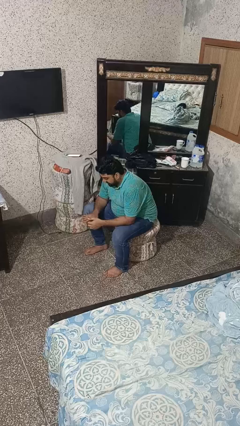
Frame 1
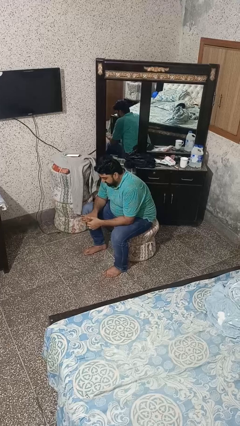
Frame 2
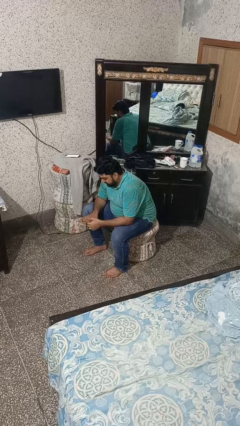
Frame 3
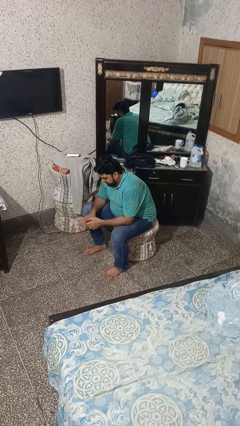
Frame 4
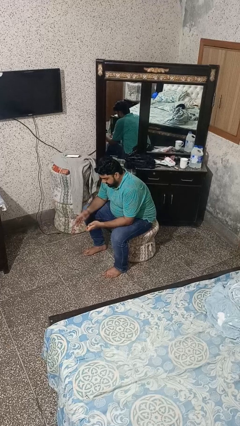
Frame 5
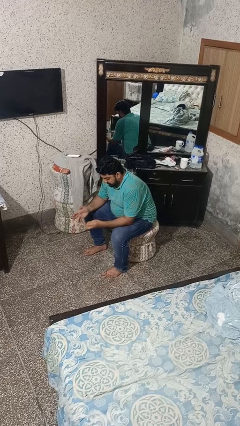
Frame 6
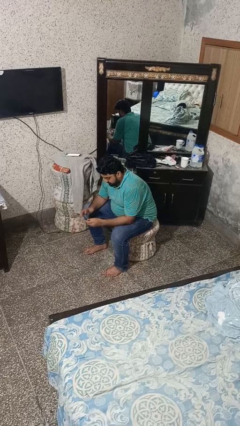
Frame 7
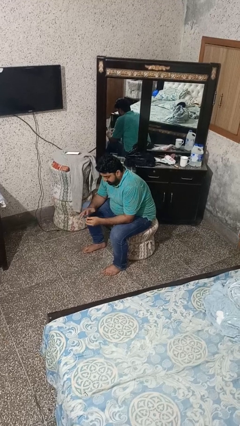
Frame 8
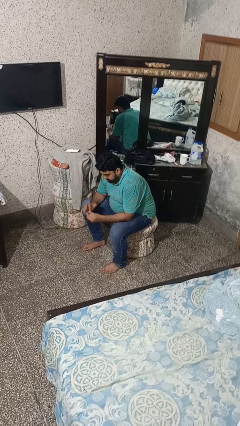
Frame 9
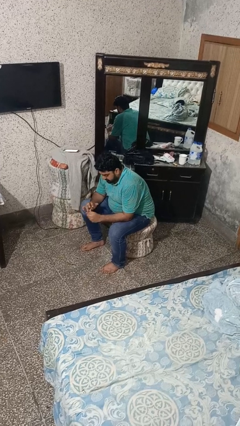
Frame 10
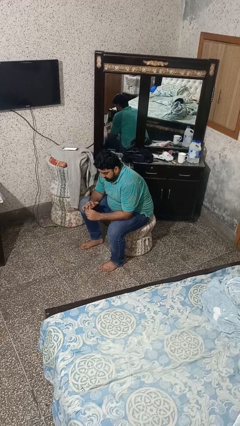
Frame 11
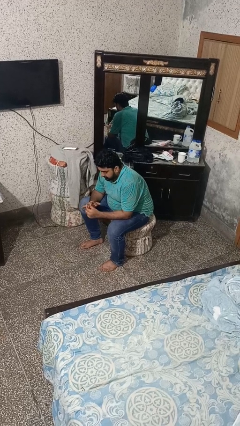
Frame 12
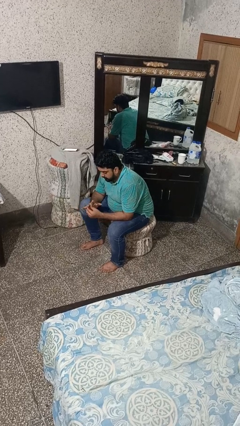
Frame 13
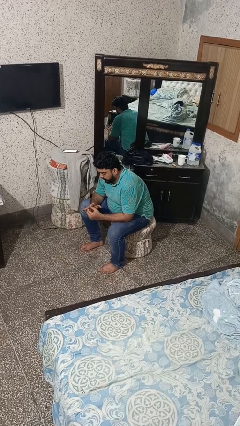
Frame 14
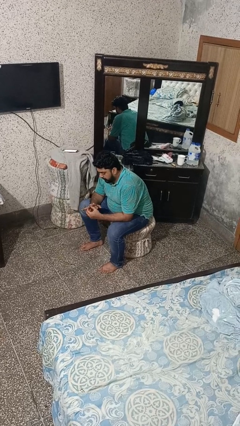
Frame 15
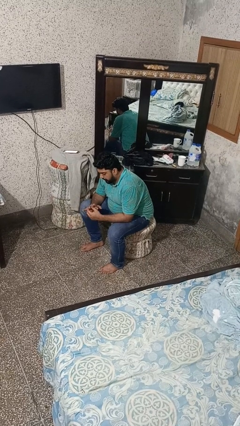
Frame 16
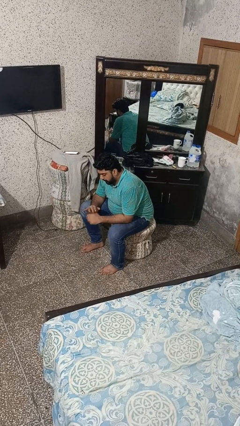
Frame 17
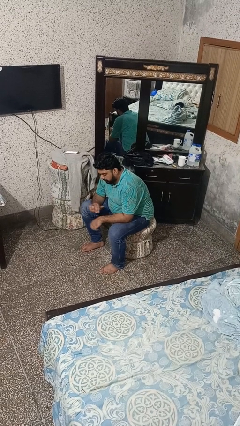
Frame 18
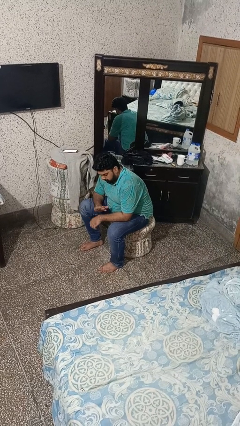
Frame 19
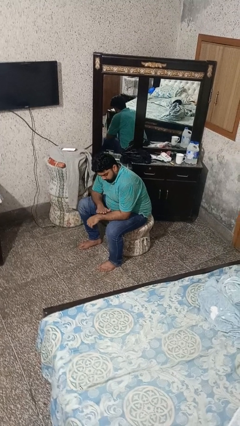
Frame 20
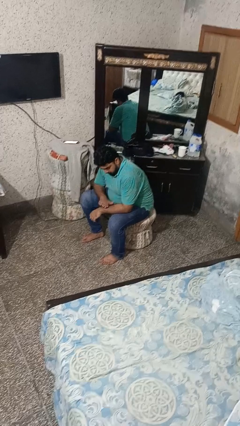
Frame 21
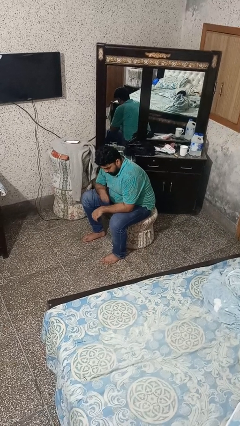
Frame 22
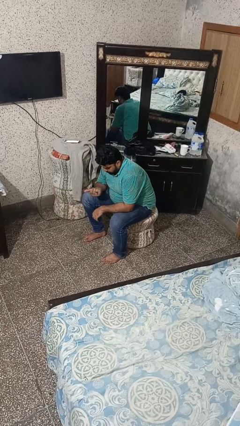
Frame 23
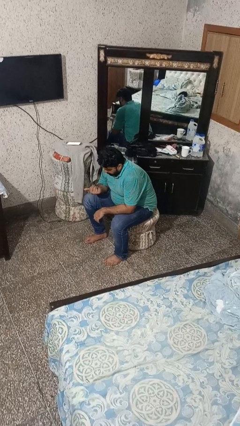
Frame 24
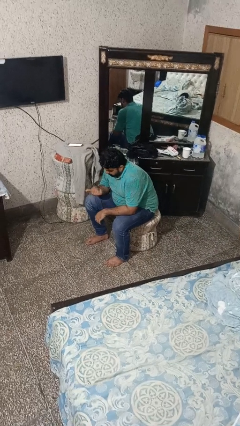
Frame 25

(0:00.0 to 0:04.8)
person puts on ring

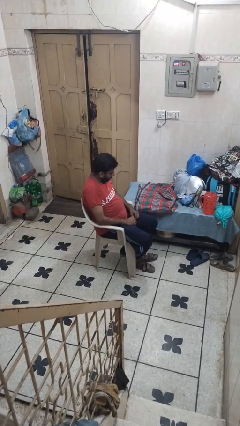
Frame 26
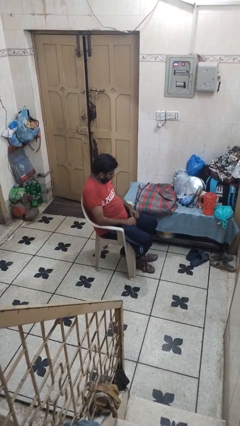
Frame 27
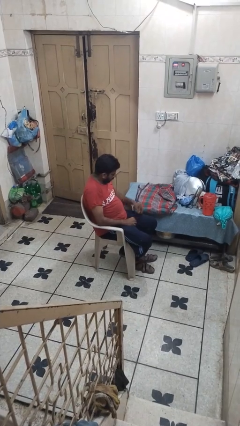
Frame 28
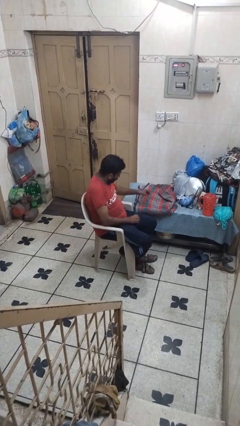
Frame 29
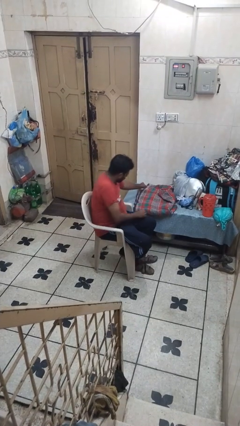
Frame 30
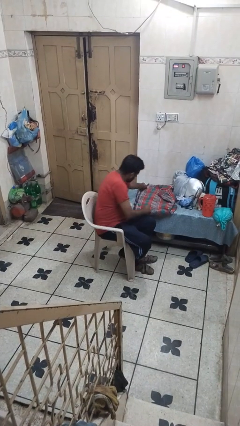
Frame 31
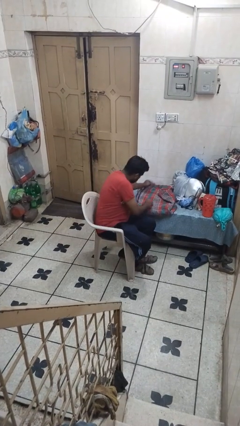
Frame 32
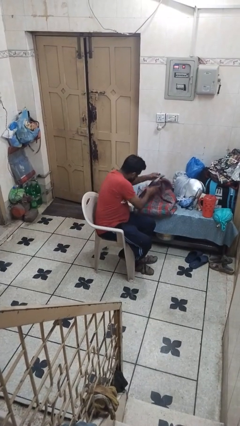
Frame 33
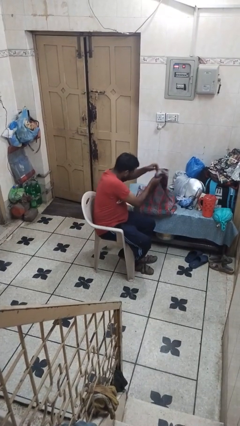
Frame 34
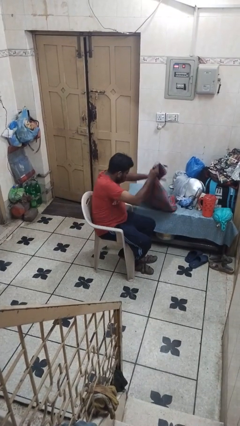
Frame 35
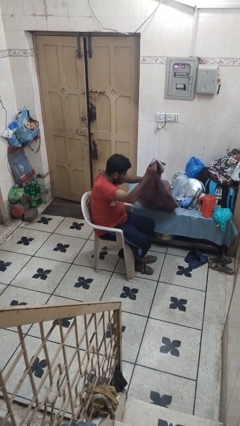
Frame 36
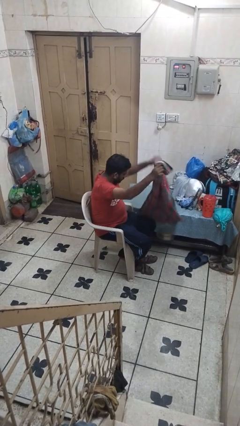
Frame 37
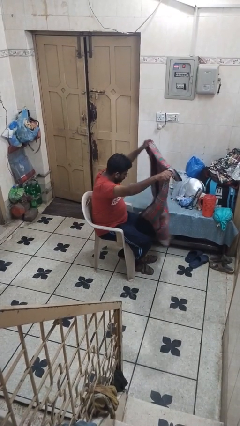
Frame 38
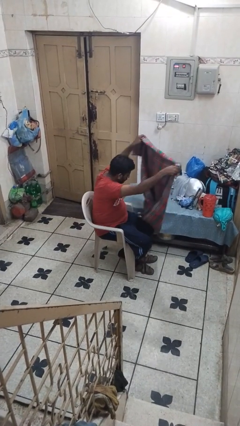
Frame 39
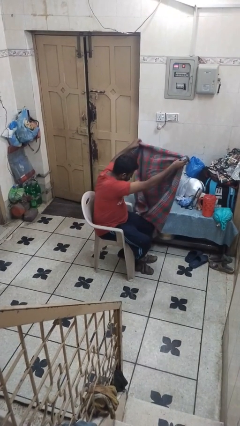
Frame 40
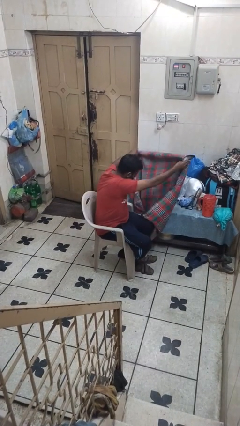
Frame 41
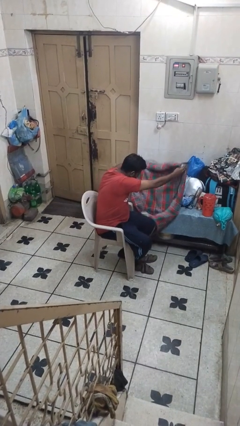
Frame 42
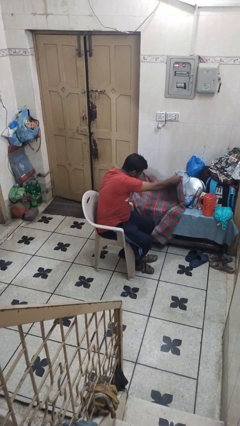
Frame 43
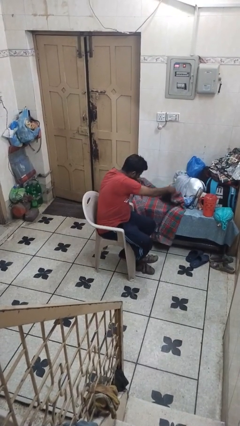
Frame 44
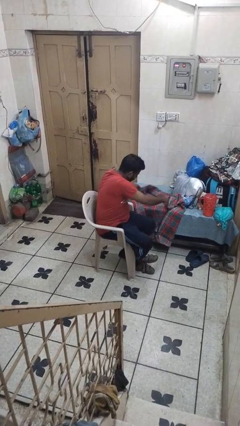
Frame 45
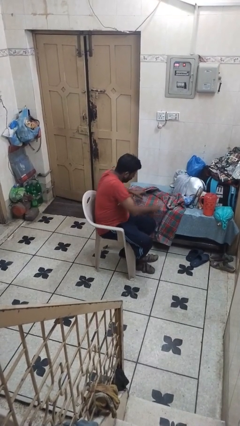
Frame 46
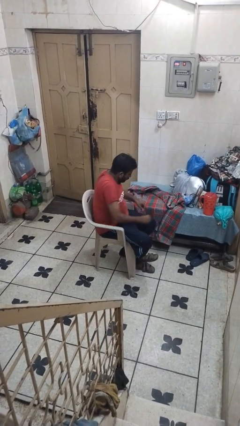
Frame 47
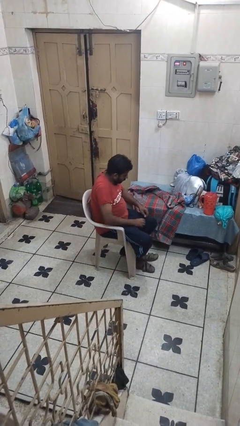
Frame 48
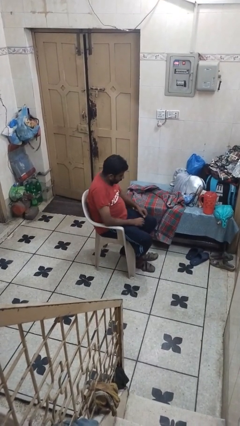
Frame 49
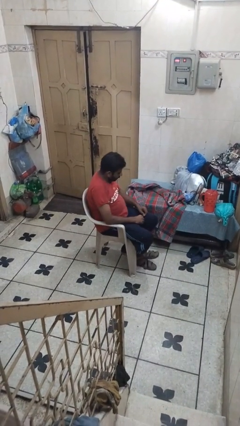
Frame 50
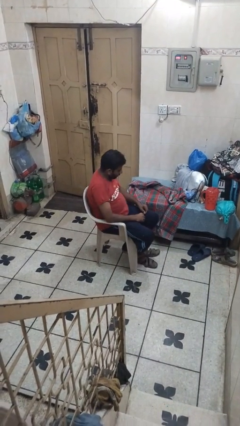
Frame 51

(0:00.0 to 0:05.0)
person unfolds blanket

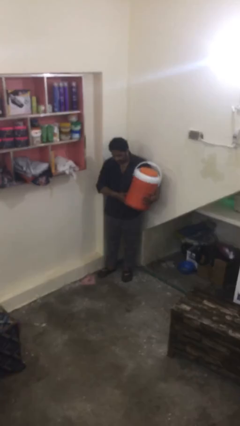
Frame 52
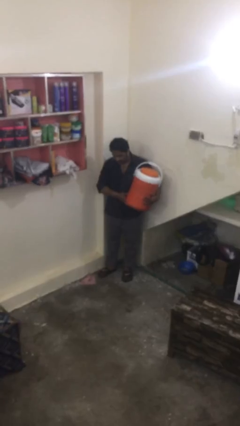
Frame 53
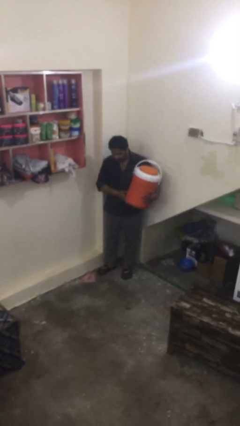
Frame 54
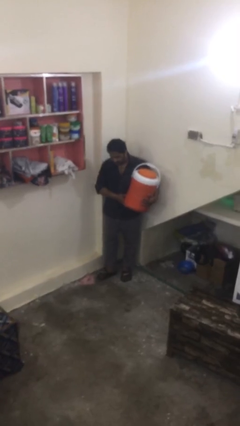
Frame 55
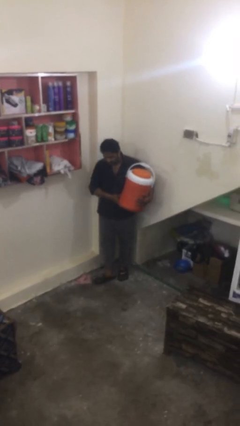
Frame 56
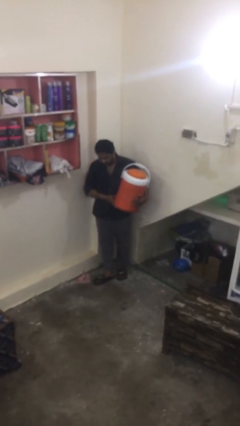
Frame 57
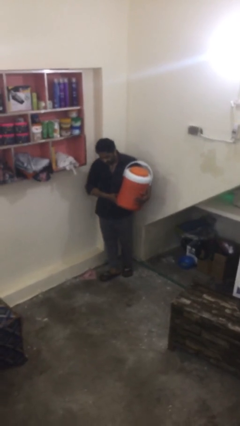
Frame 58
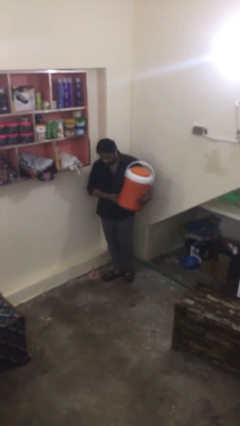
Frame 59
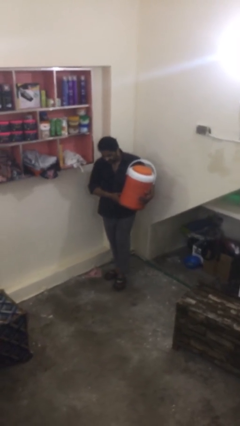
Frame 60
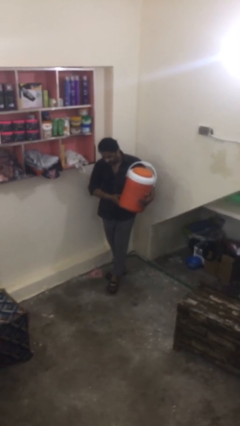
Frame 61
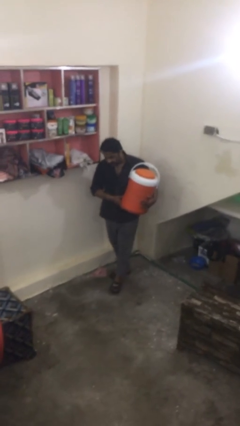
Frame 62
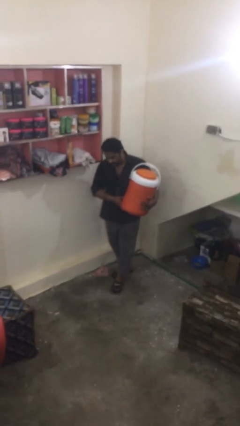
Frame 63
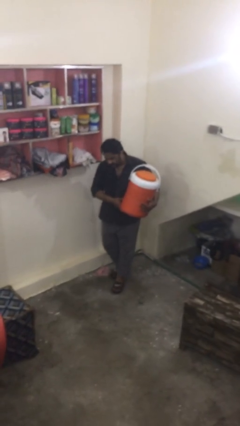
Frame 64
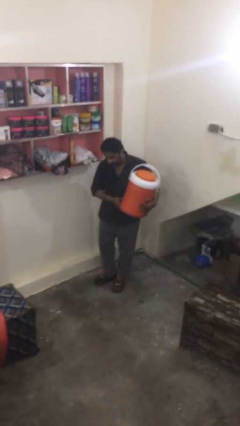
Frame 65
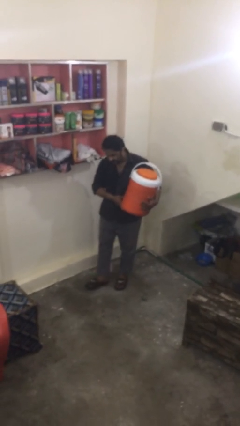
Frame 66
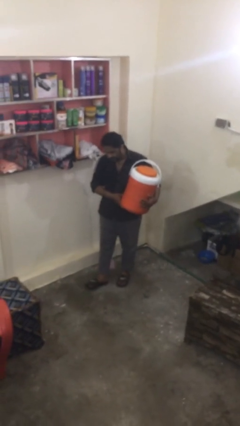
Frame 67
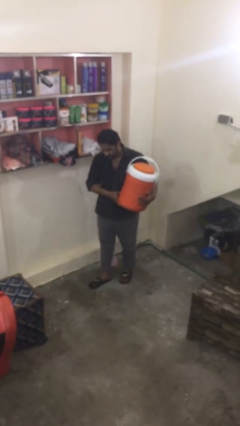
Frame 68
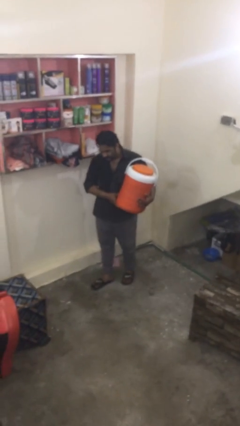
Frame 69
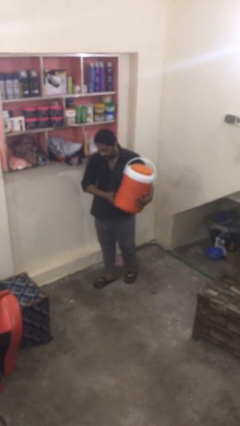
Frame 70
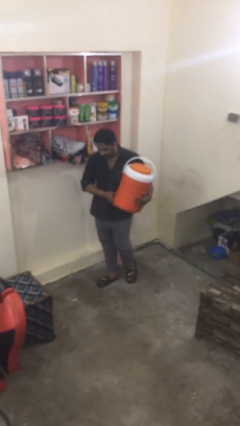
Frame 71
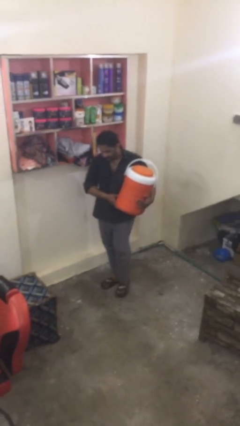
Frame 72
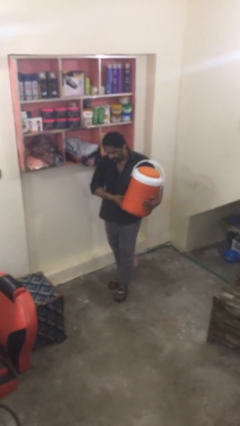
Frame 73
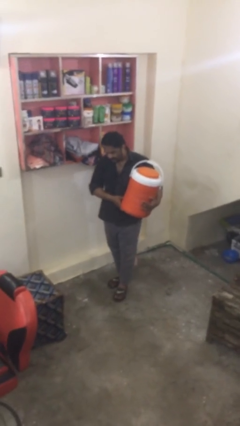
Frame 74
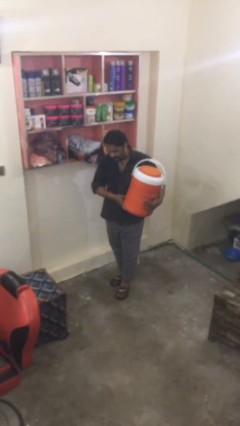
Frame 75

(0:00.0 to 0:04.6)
person carries heavy object

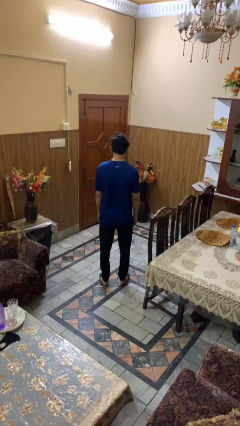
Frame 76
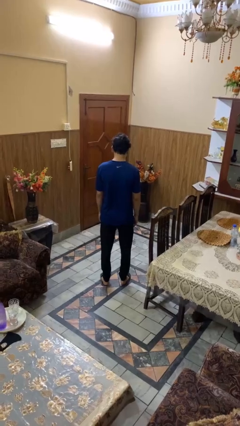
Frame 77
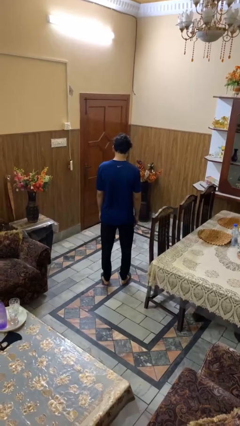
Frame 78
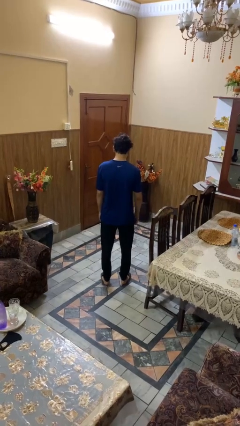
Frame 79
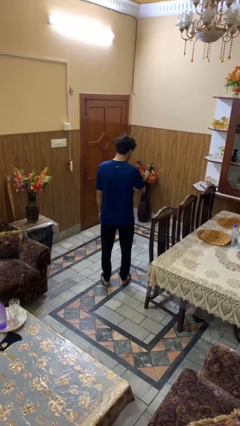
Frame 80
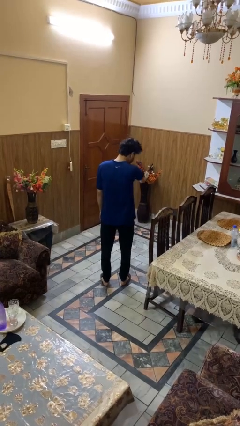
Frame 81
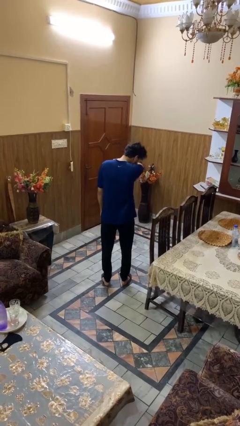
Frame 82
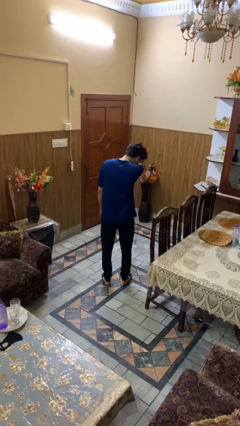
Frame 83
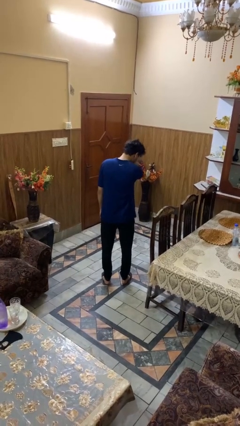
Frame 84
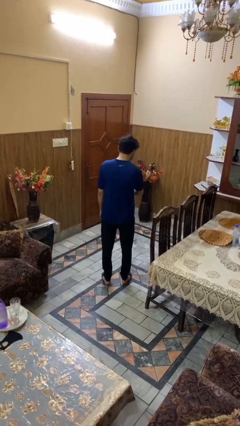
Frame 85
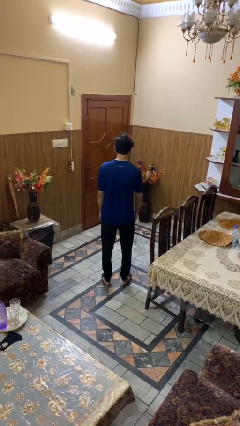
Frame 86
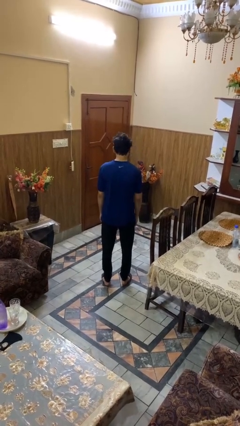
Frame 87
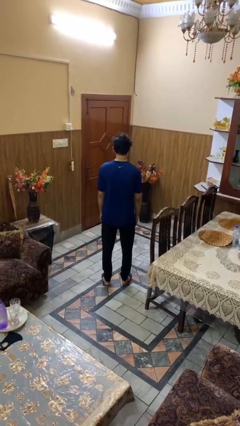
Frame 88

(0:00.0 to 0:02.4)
person sneezes into arm

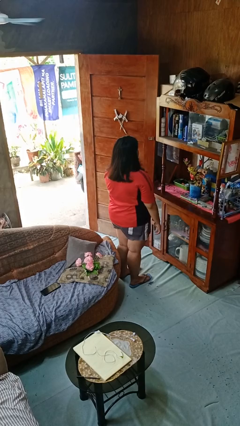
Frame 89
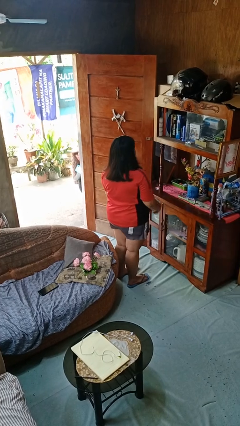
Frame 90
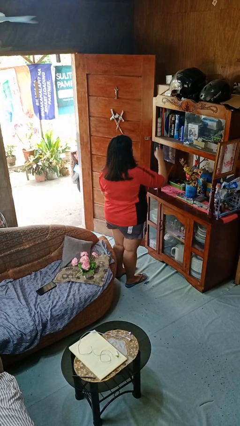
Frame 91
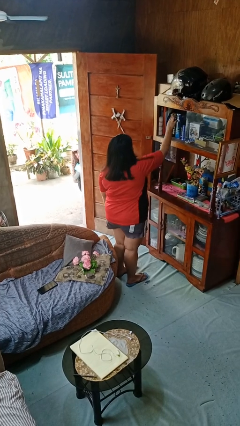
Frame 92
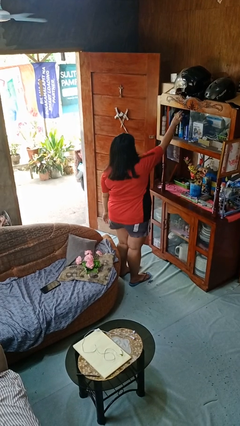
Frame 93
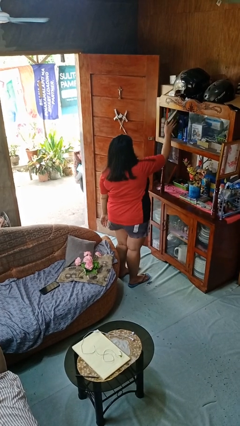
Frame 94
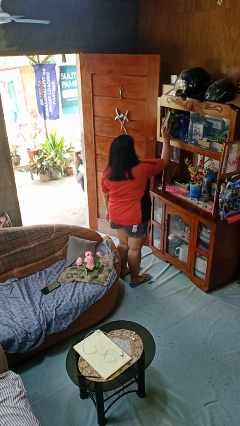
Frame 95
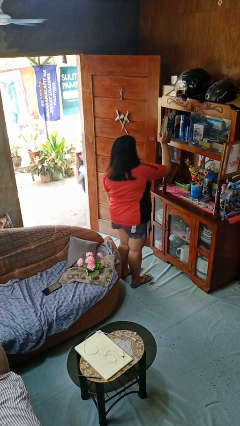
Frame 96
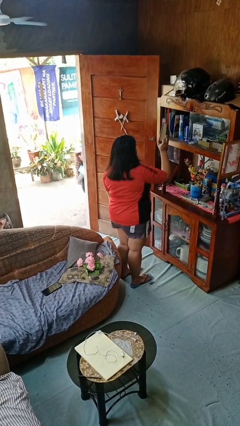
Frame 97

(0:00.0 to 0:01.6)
person picks up object from shelf
